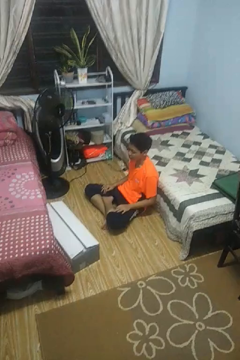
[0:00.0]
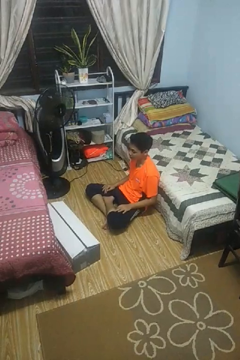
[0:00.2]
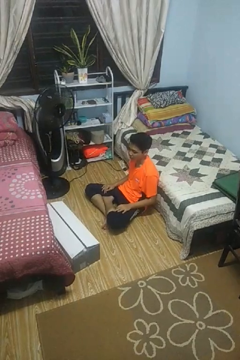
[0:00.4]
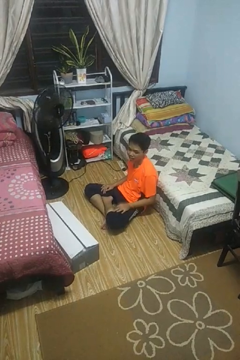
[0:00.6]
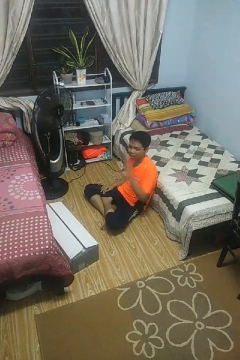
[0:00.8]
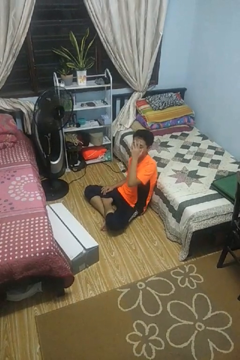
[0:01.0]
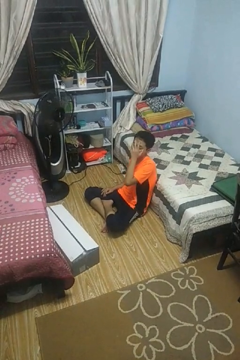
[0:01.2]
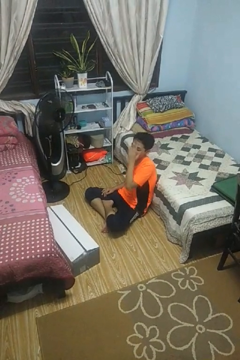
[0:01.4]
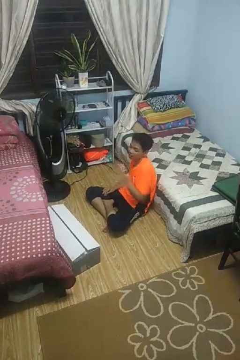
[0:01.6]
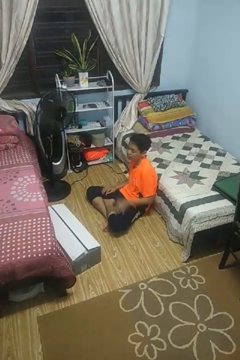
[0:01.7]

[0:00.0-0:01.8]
person covers face with hands

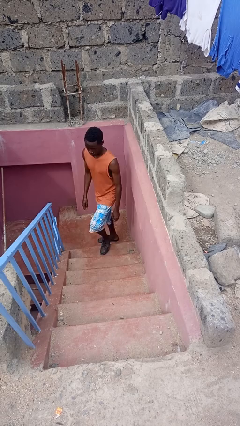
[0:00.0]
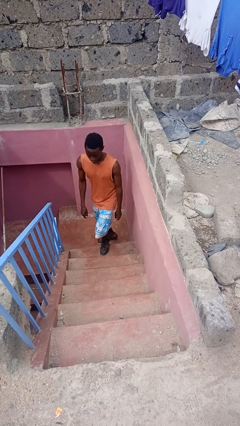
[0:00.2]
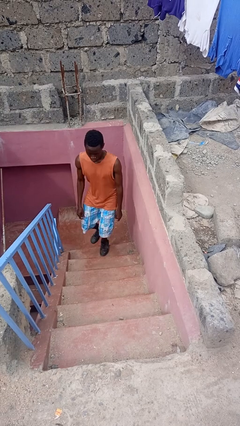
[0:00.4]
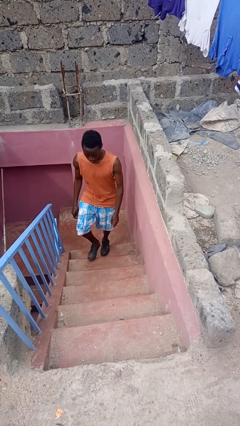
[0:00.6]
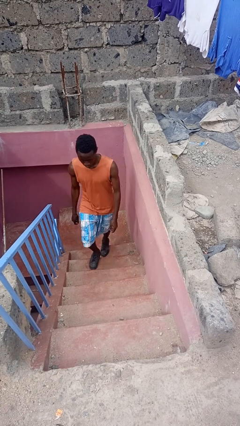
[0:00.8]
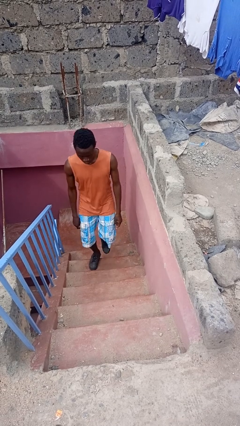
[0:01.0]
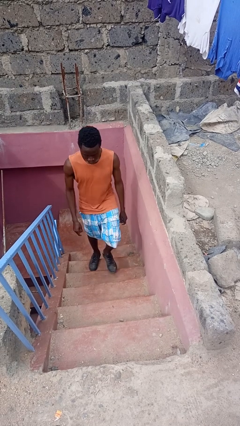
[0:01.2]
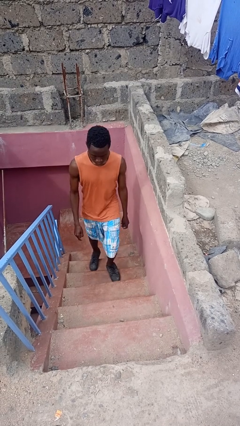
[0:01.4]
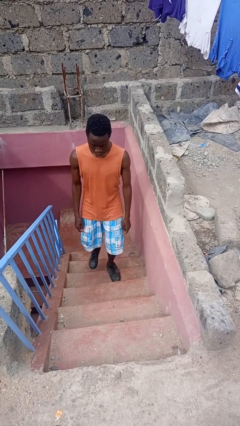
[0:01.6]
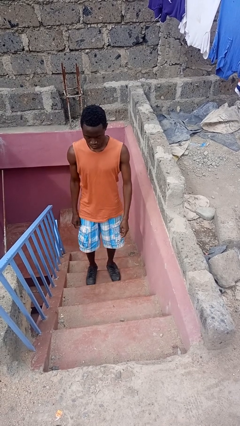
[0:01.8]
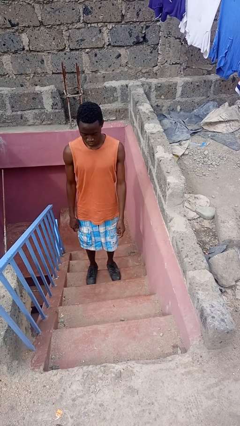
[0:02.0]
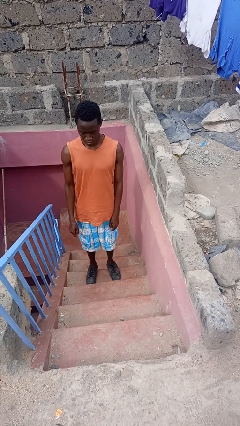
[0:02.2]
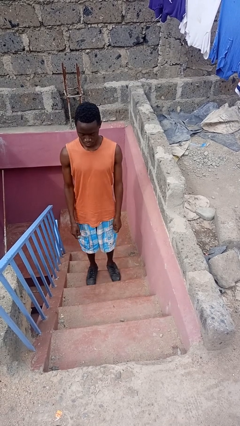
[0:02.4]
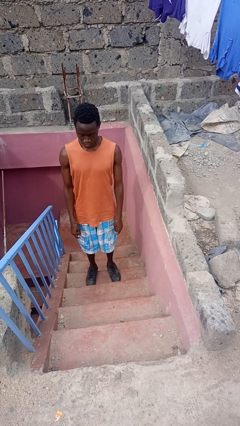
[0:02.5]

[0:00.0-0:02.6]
person climbs up stairs

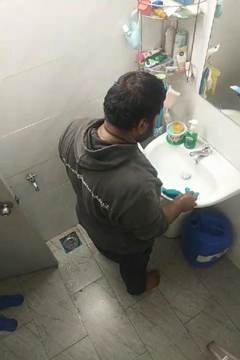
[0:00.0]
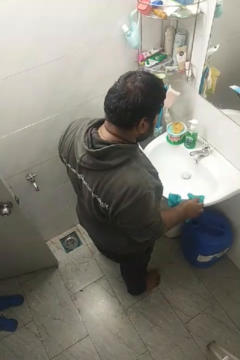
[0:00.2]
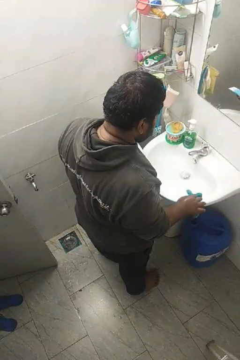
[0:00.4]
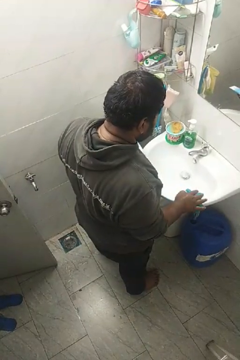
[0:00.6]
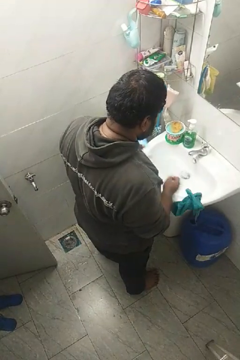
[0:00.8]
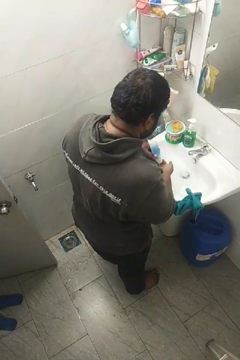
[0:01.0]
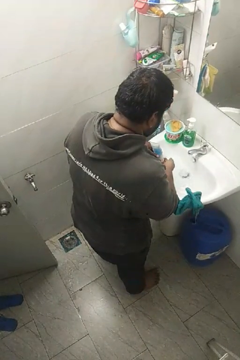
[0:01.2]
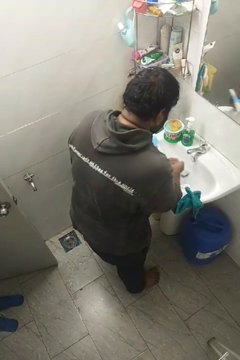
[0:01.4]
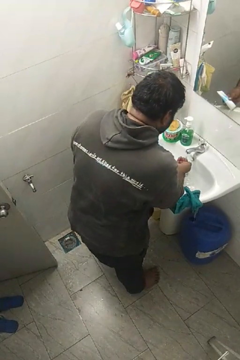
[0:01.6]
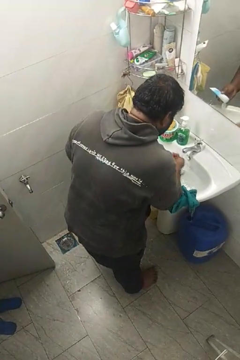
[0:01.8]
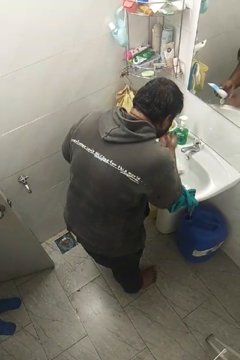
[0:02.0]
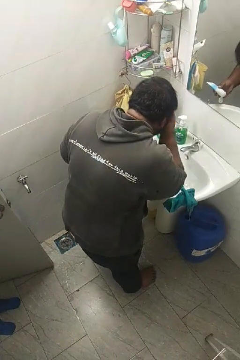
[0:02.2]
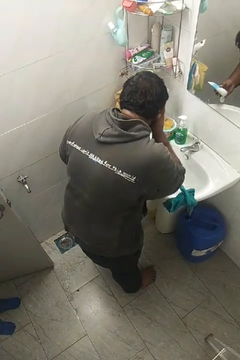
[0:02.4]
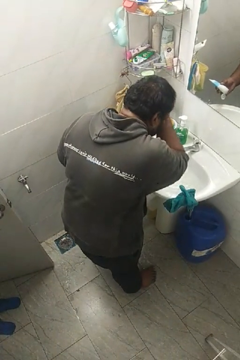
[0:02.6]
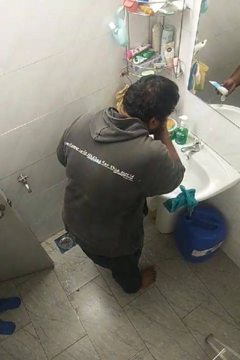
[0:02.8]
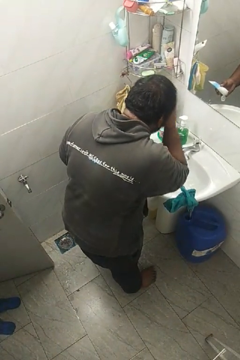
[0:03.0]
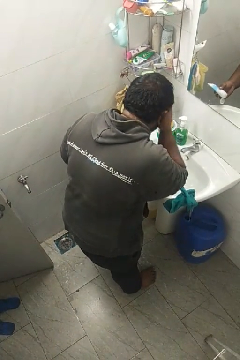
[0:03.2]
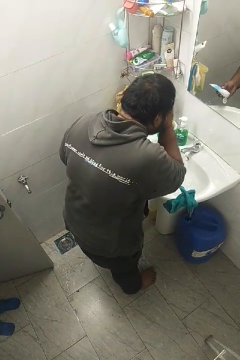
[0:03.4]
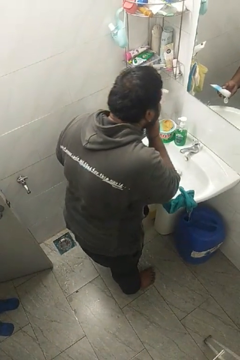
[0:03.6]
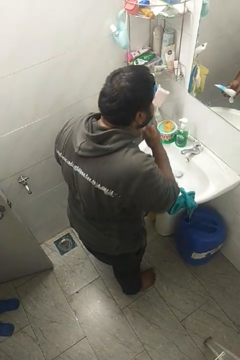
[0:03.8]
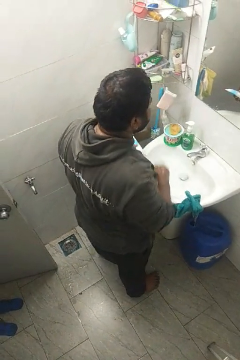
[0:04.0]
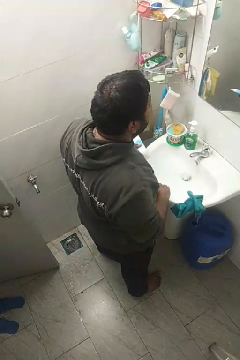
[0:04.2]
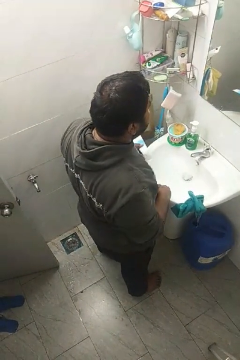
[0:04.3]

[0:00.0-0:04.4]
person washes face

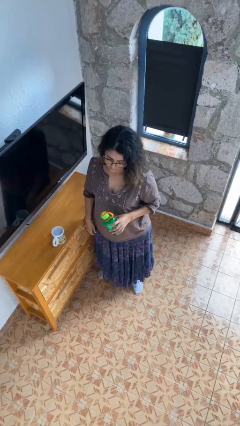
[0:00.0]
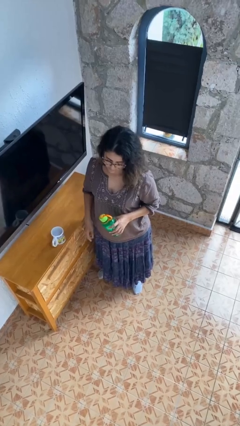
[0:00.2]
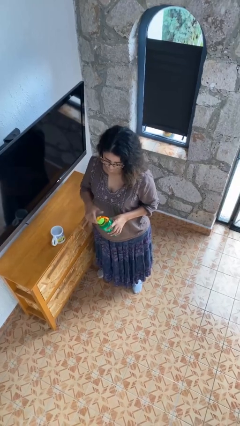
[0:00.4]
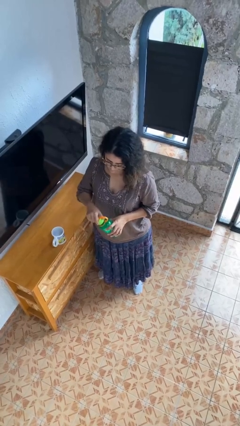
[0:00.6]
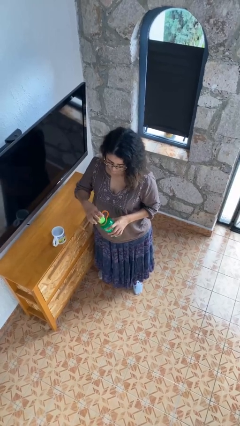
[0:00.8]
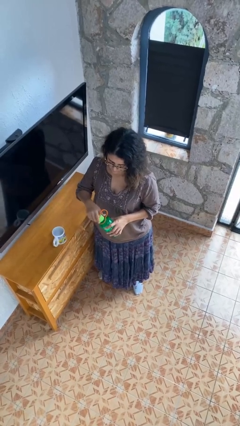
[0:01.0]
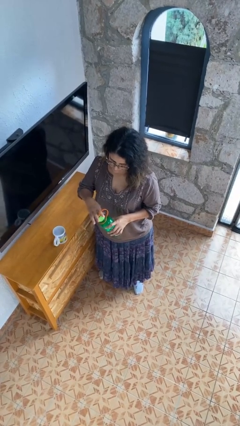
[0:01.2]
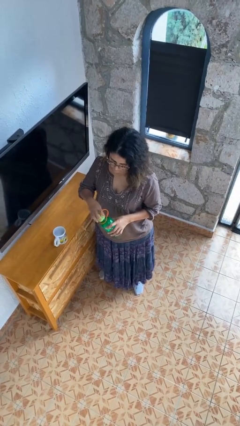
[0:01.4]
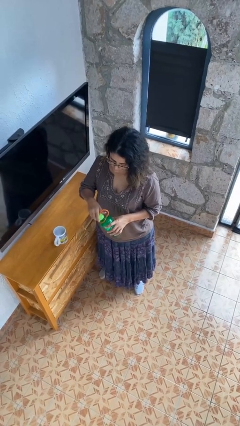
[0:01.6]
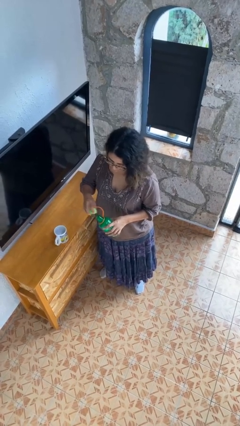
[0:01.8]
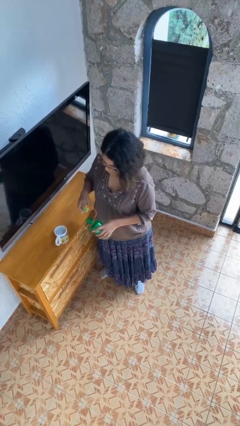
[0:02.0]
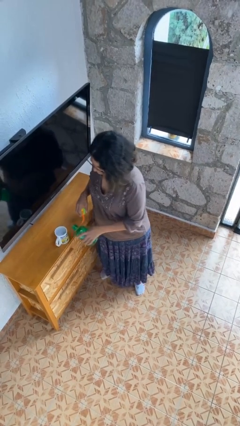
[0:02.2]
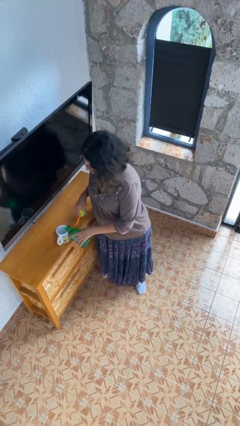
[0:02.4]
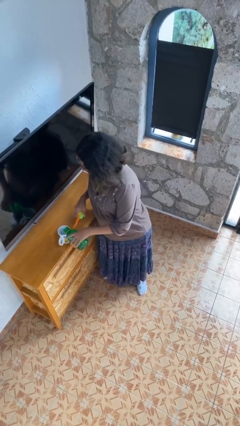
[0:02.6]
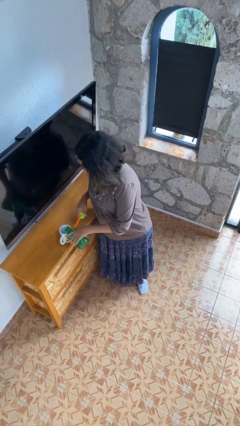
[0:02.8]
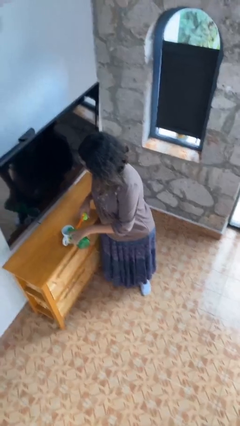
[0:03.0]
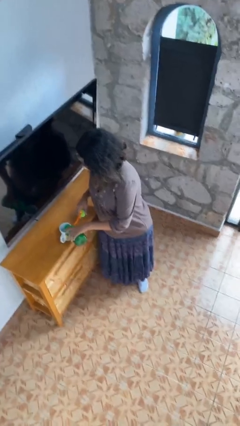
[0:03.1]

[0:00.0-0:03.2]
person unscrews lid from bottle

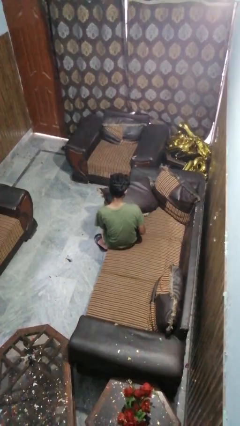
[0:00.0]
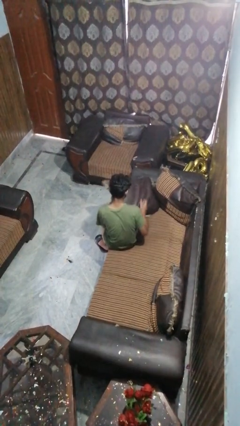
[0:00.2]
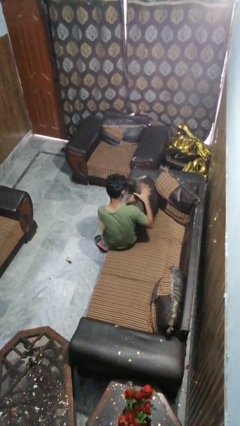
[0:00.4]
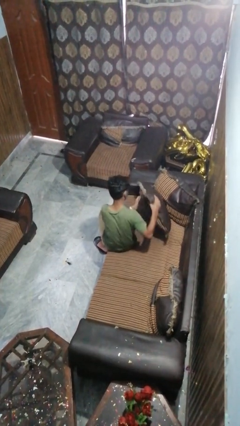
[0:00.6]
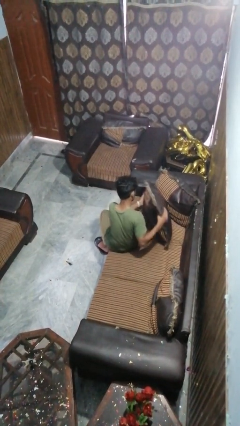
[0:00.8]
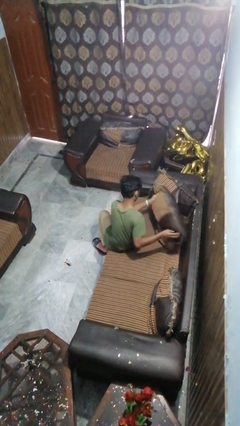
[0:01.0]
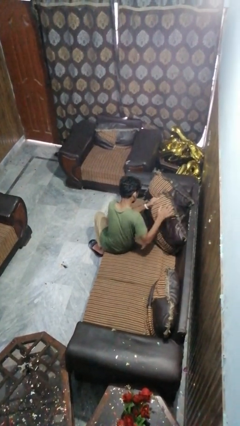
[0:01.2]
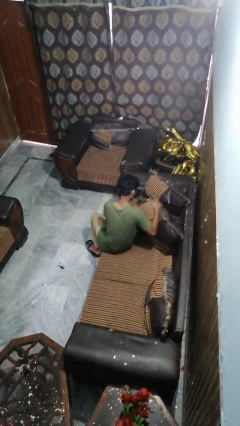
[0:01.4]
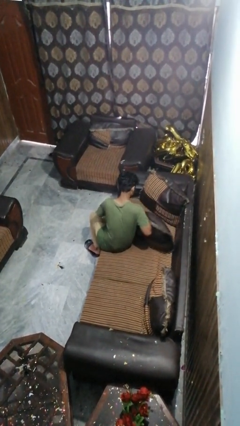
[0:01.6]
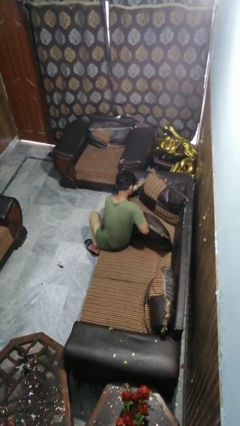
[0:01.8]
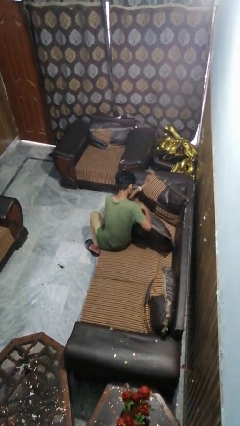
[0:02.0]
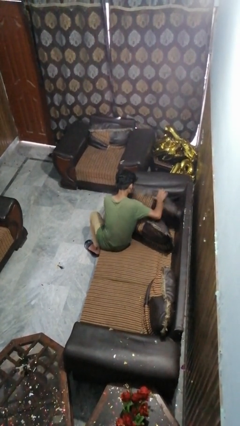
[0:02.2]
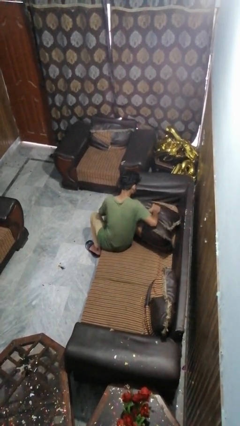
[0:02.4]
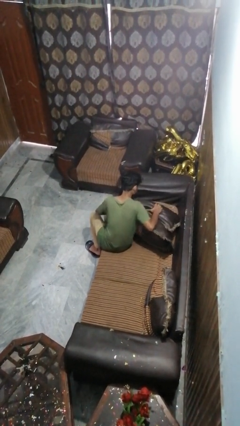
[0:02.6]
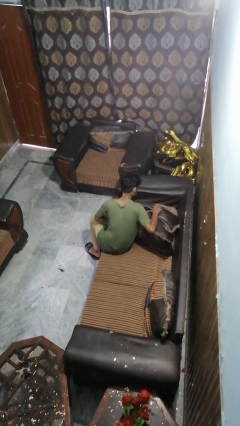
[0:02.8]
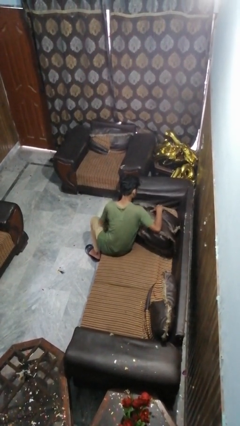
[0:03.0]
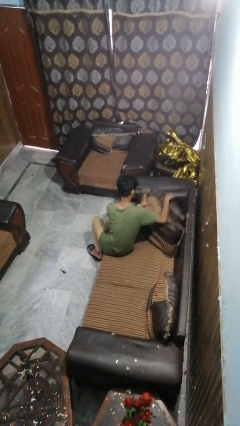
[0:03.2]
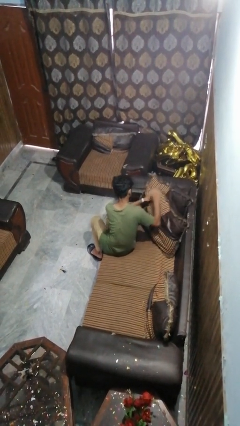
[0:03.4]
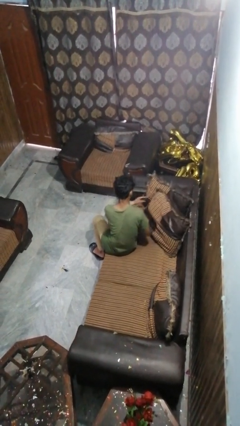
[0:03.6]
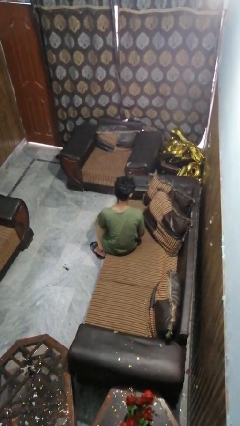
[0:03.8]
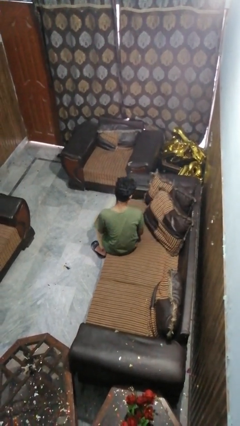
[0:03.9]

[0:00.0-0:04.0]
person searches in couch

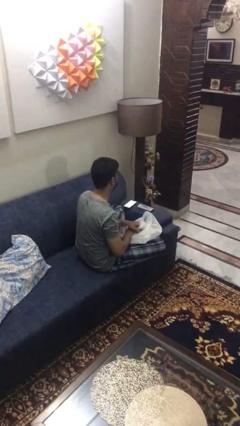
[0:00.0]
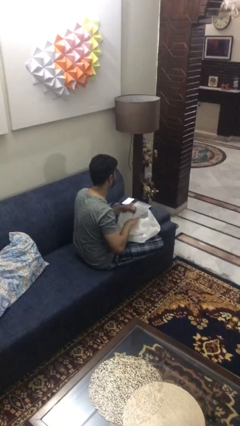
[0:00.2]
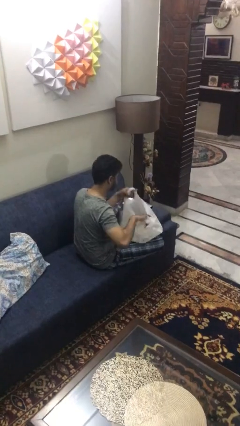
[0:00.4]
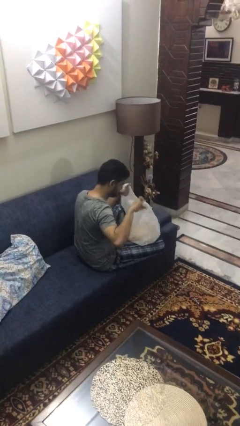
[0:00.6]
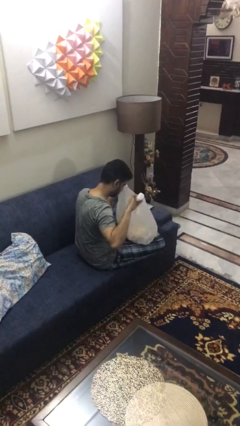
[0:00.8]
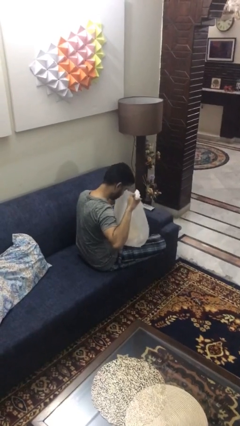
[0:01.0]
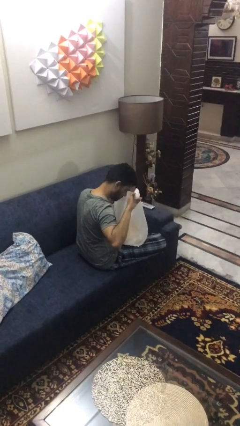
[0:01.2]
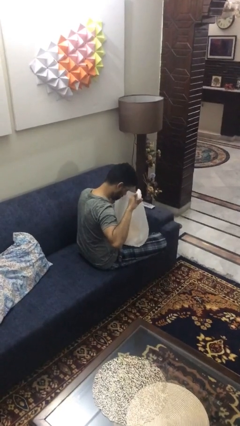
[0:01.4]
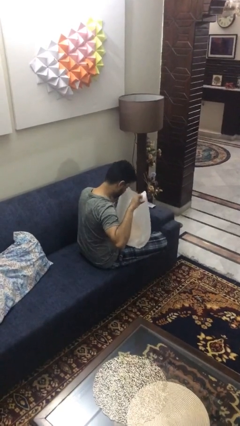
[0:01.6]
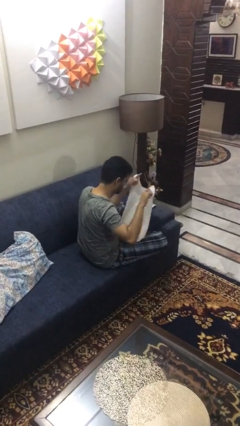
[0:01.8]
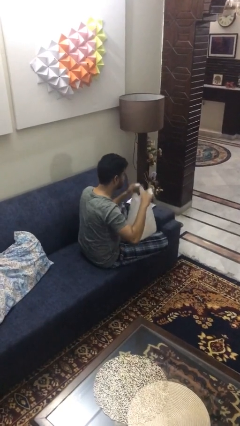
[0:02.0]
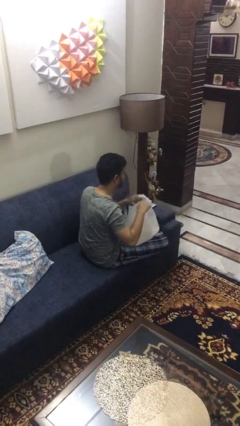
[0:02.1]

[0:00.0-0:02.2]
person searches in bag

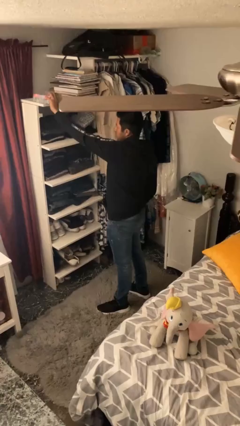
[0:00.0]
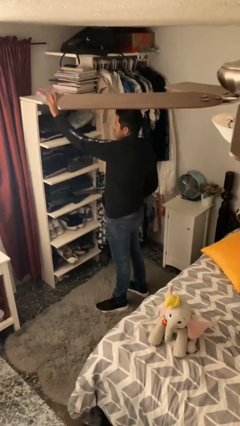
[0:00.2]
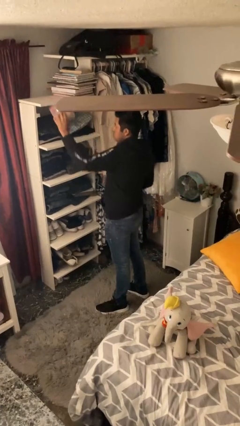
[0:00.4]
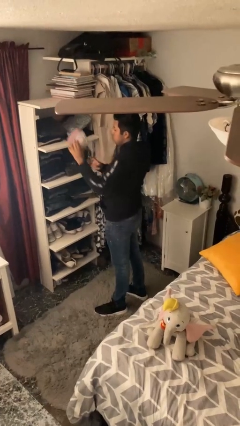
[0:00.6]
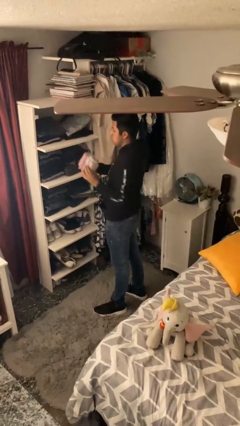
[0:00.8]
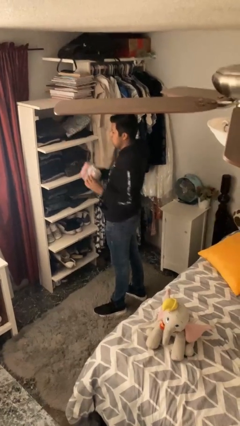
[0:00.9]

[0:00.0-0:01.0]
person picks up object from shelf
